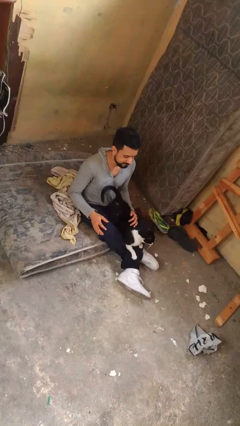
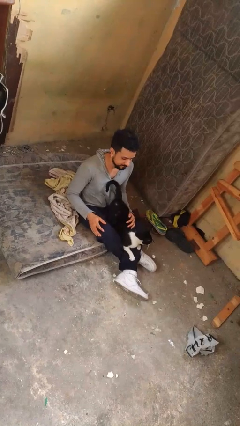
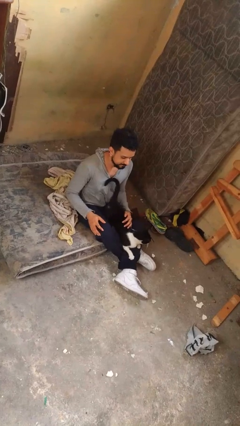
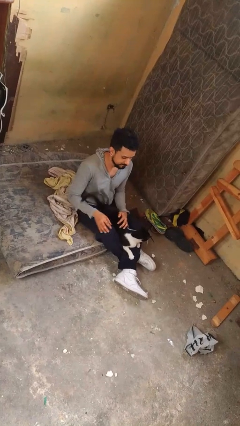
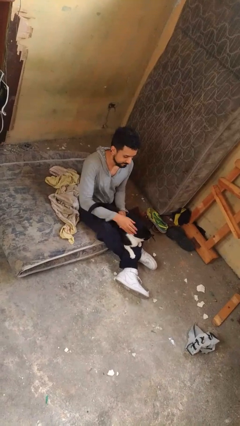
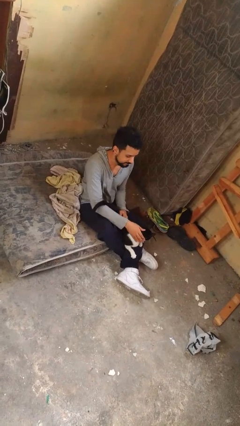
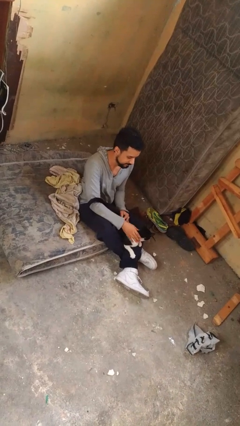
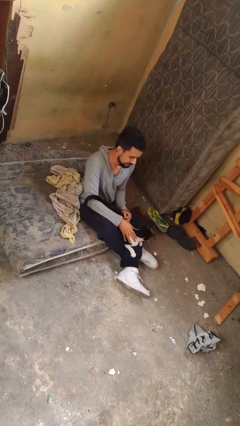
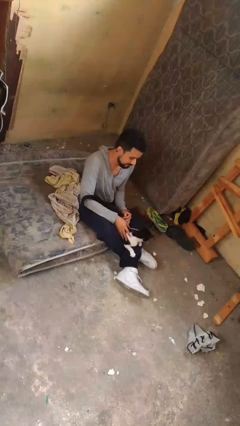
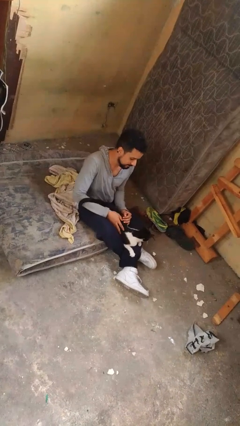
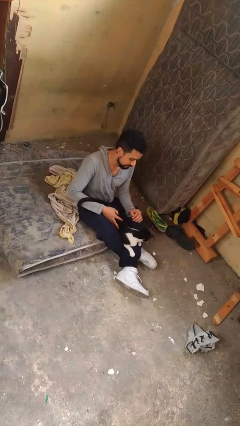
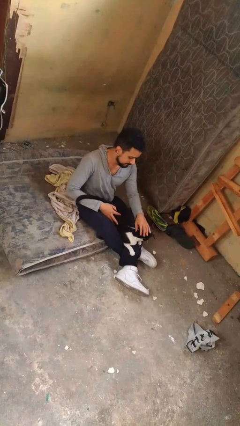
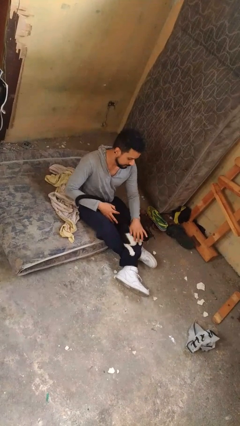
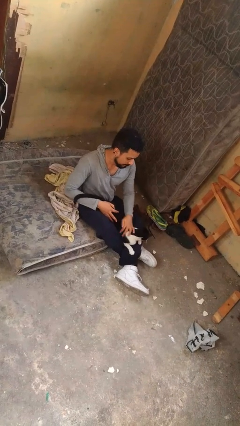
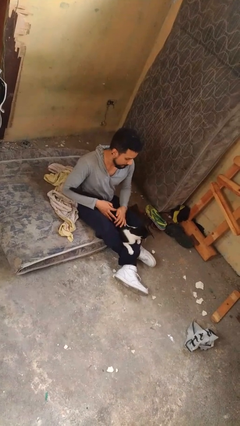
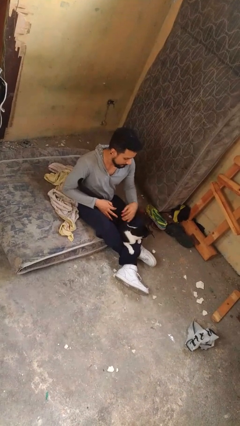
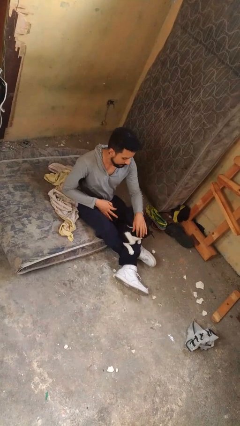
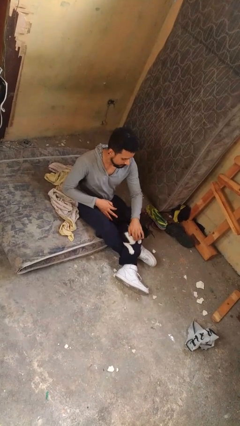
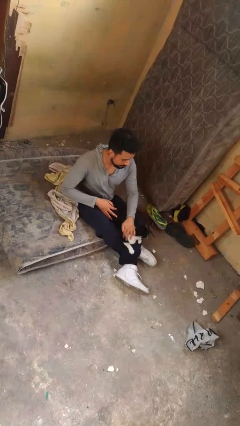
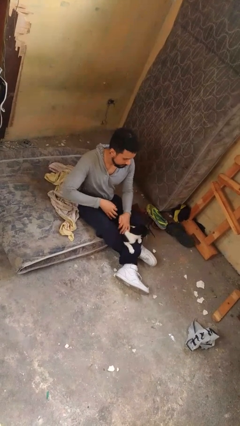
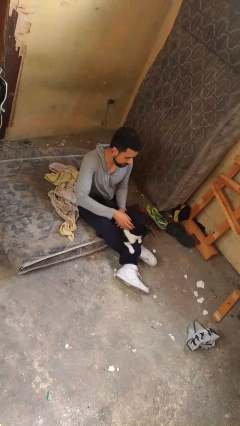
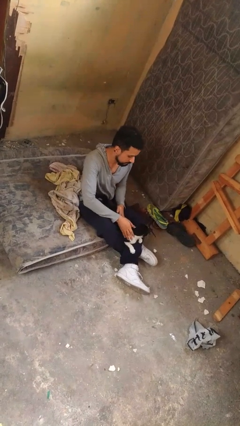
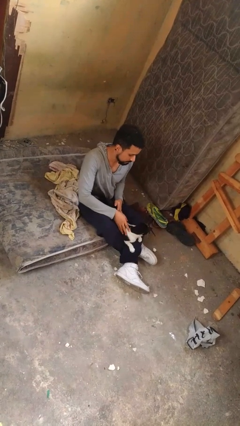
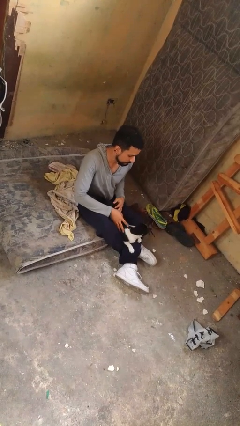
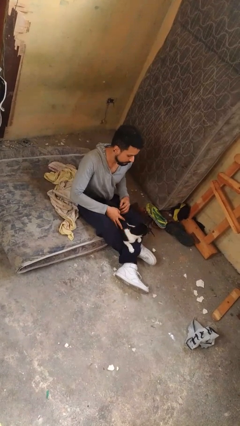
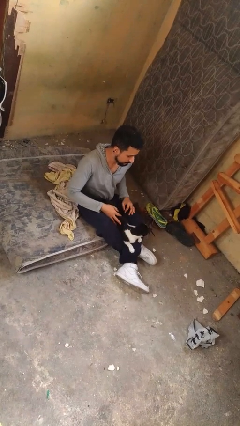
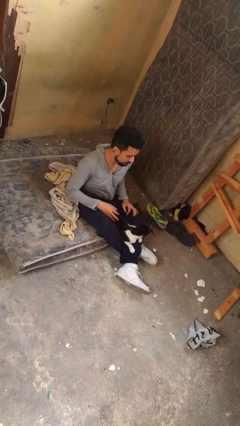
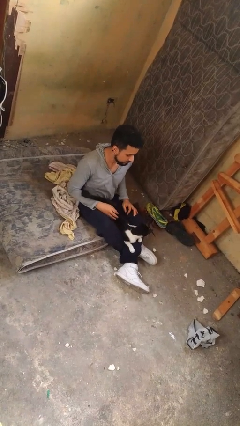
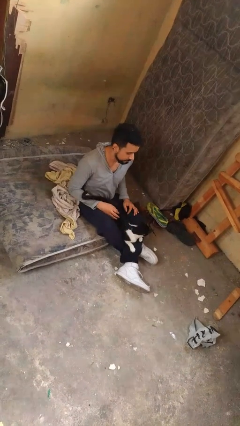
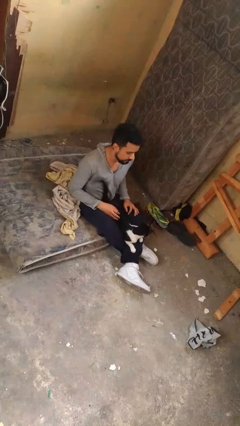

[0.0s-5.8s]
person pets cat

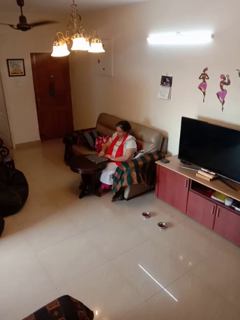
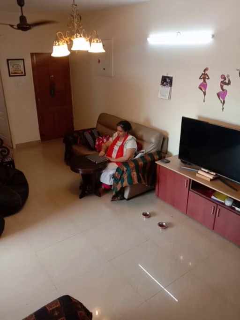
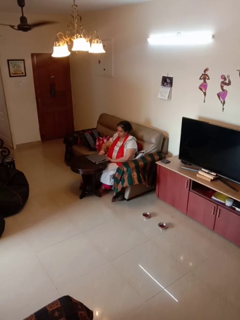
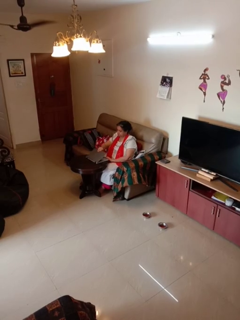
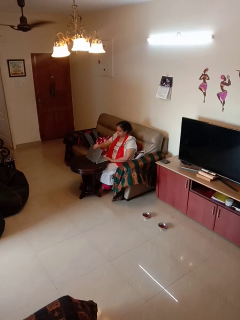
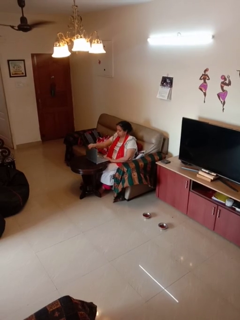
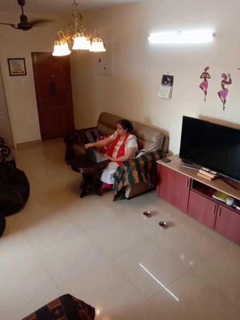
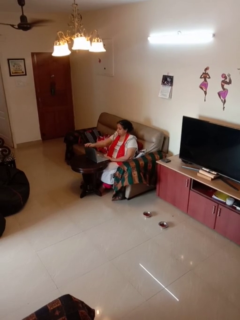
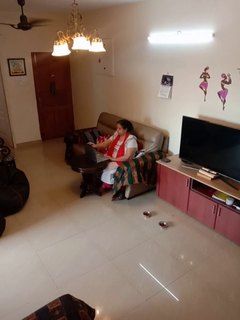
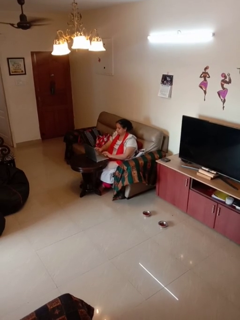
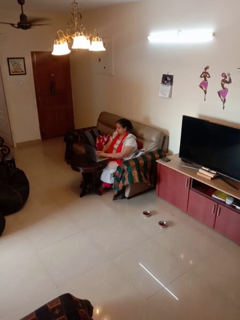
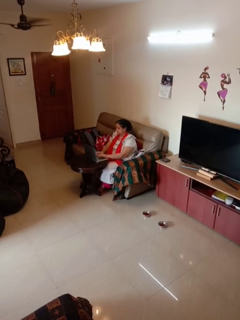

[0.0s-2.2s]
person opens laptop

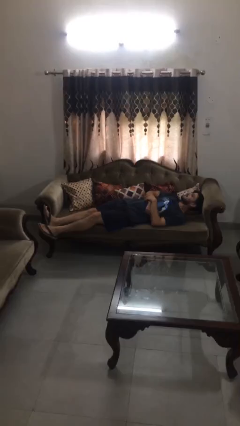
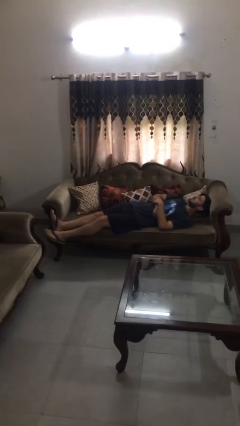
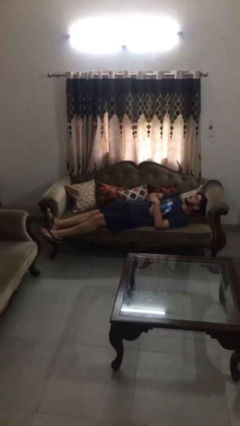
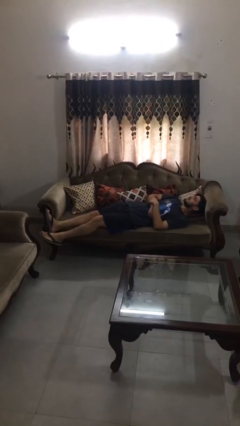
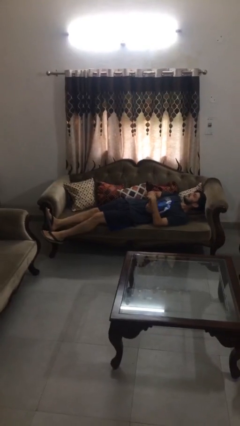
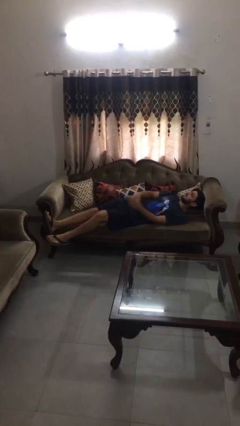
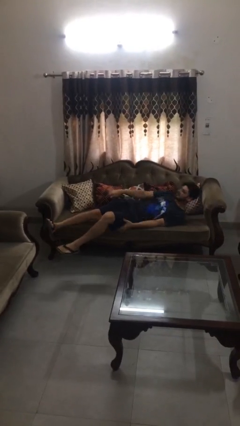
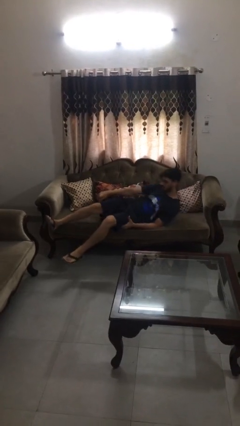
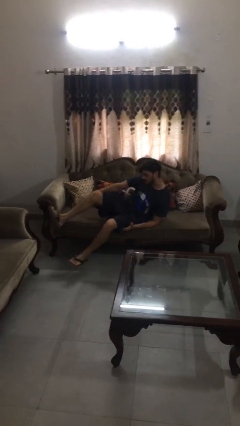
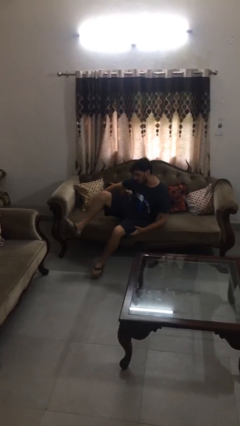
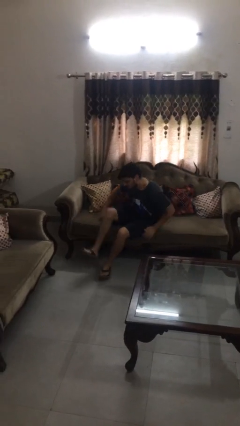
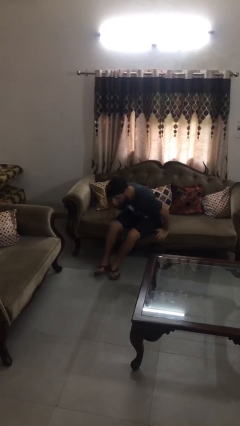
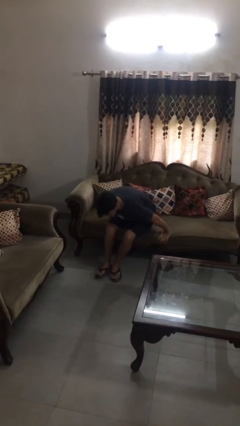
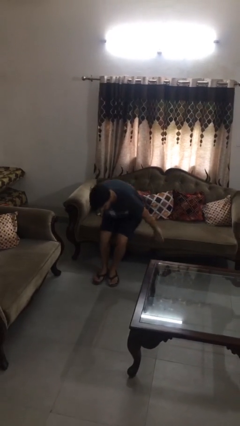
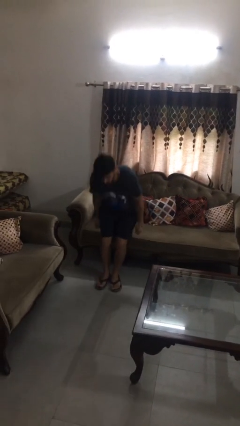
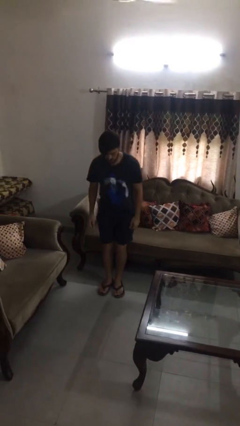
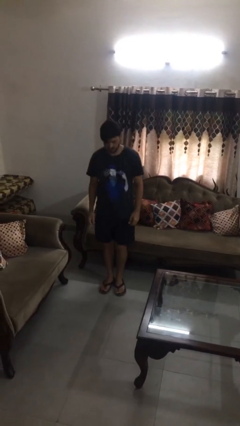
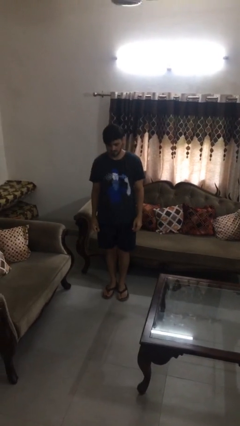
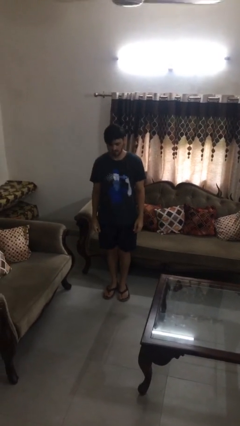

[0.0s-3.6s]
person stands up

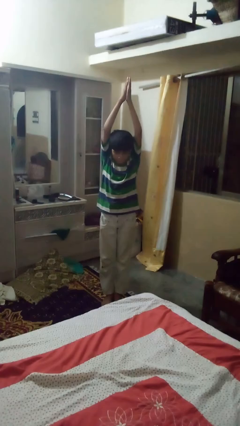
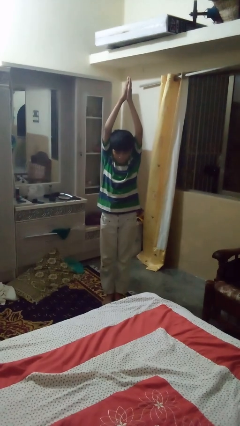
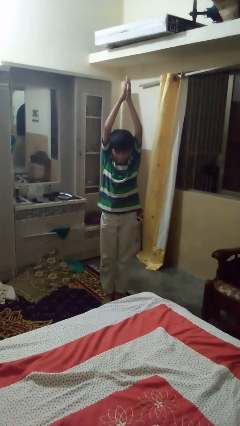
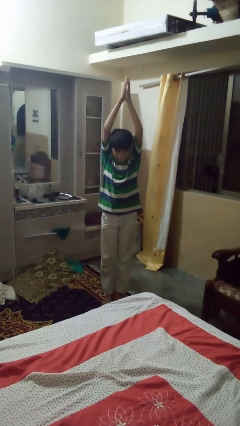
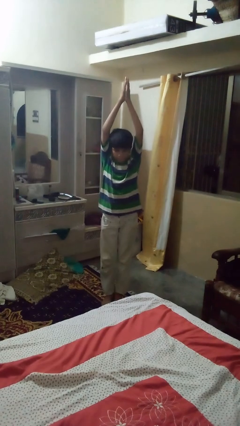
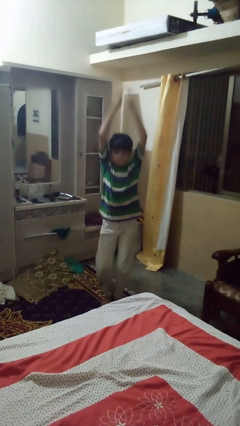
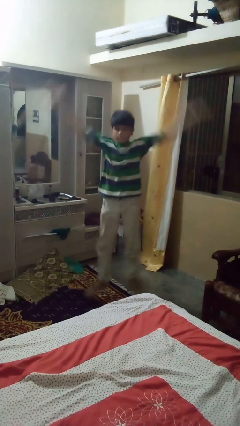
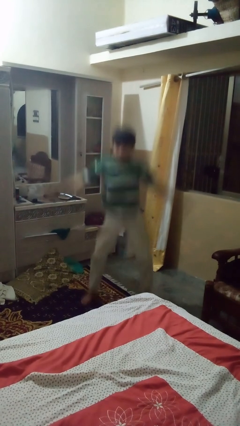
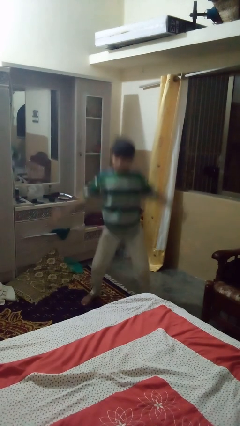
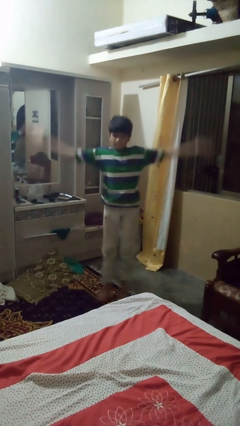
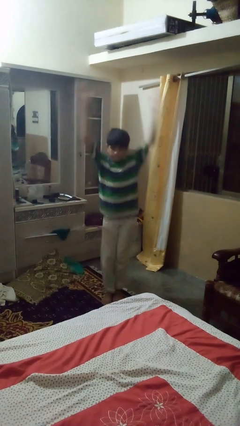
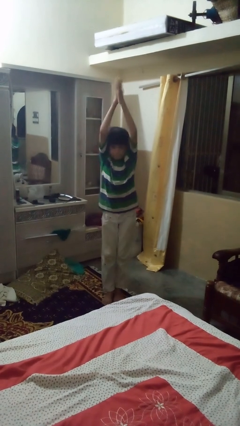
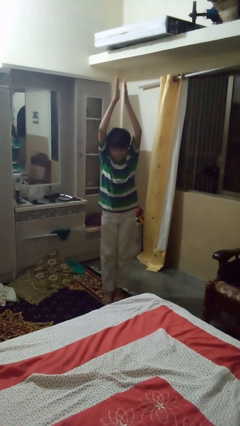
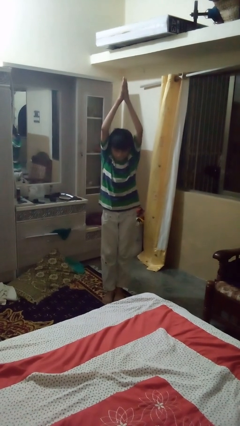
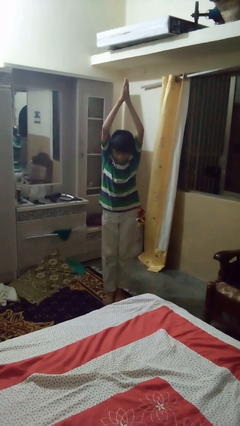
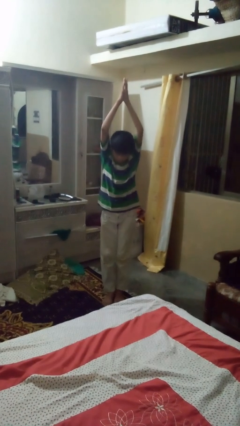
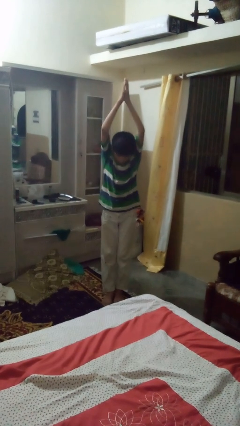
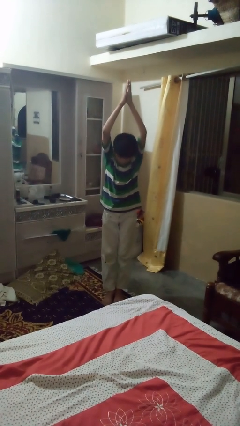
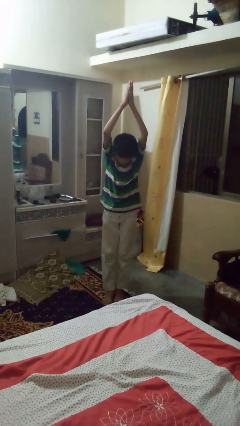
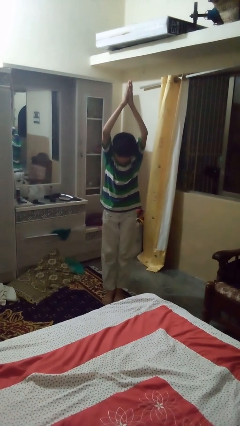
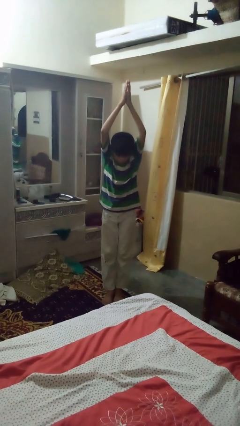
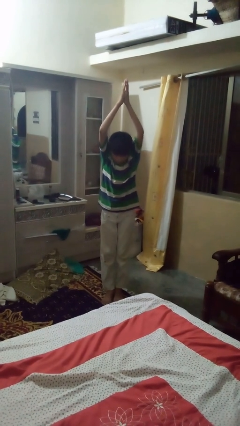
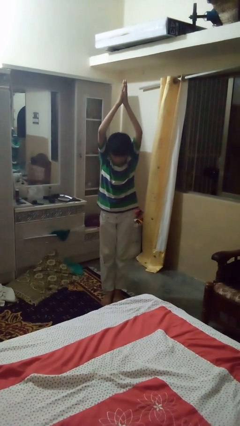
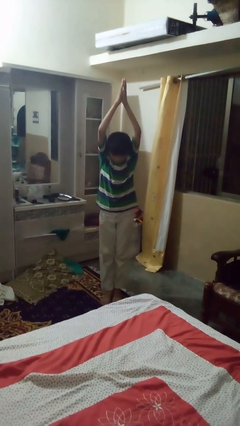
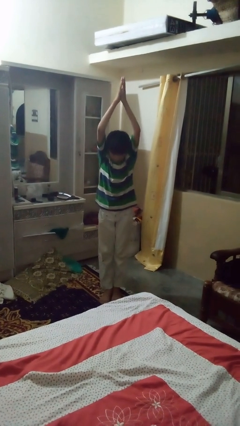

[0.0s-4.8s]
person exercises with jumping jacks

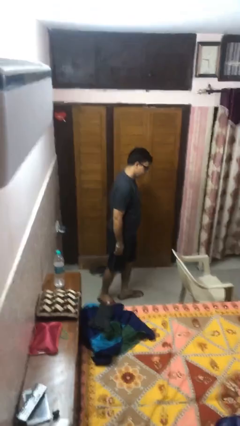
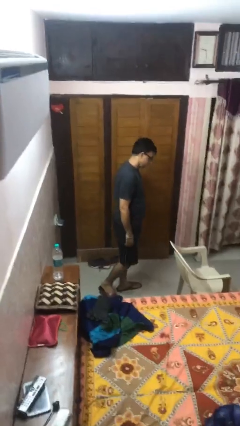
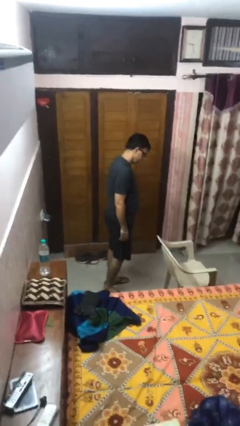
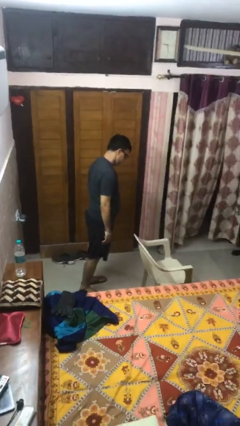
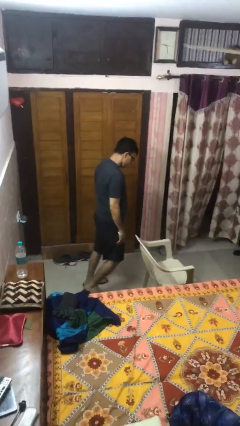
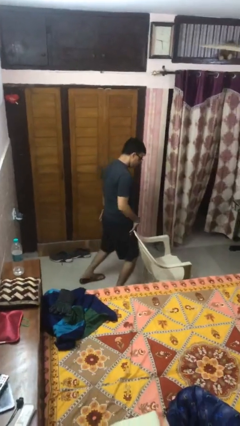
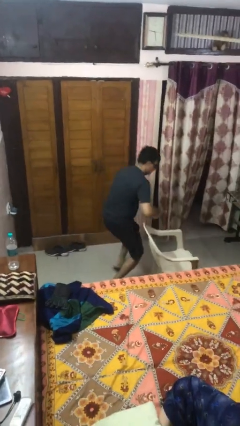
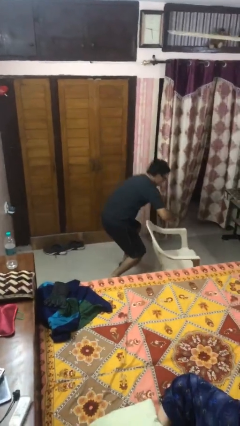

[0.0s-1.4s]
person trips on object on floor

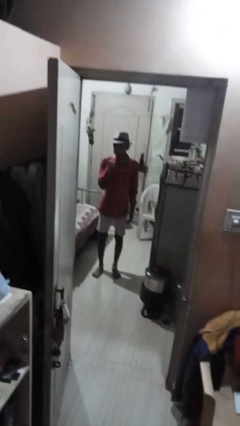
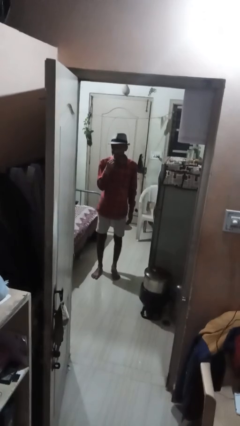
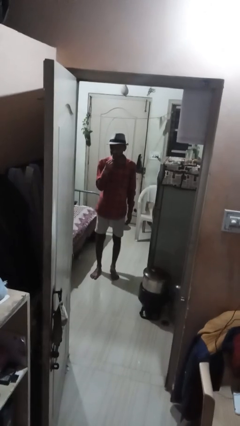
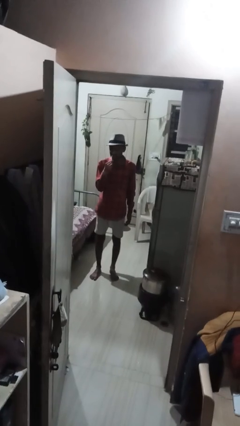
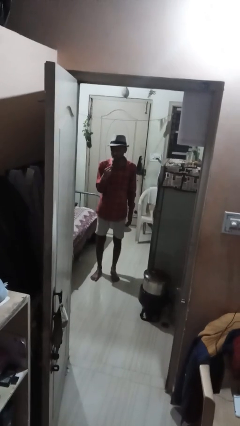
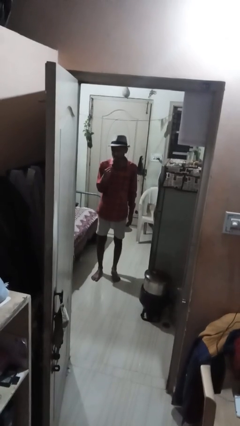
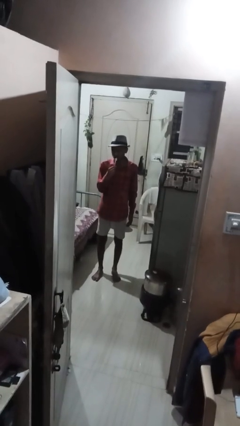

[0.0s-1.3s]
person brushes teeth
